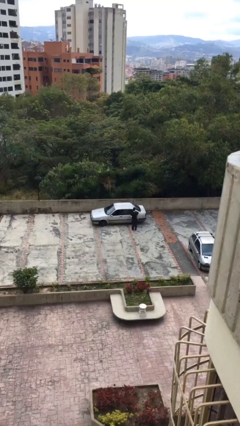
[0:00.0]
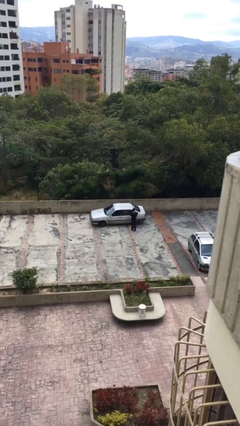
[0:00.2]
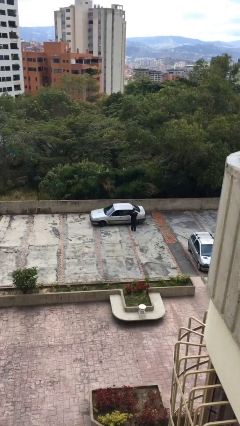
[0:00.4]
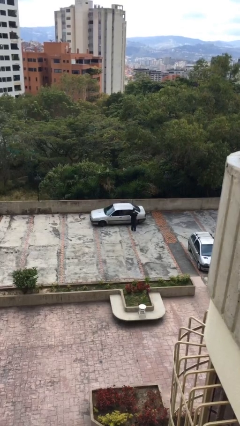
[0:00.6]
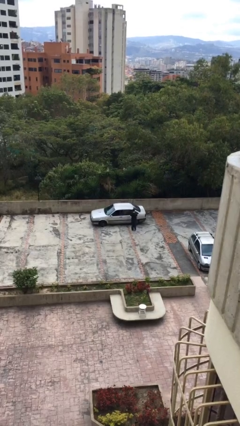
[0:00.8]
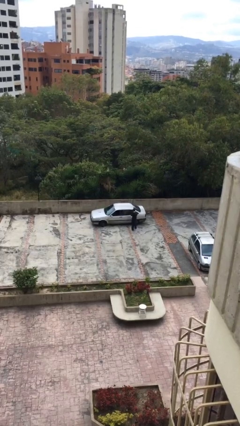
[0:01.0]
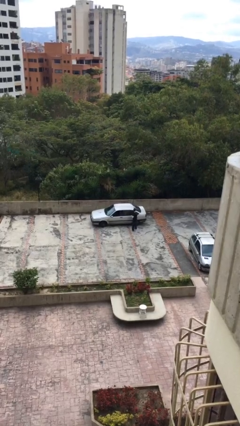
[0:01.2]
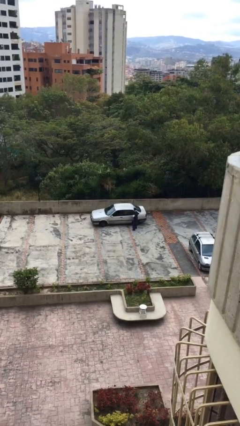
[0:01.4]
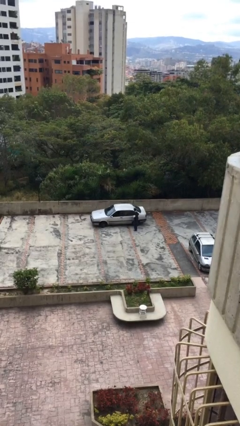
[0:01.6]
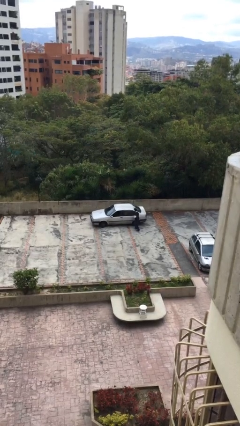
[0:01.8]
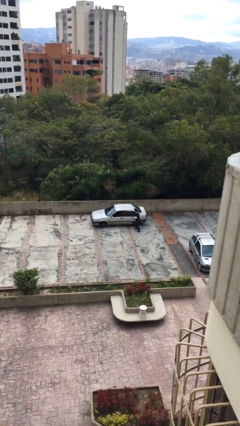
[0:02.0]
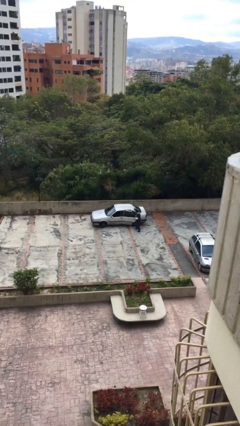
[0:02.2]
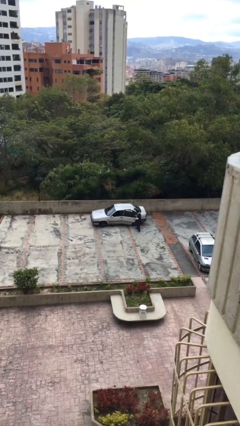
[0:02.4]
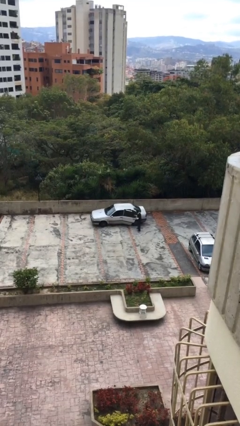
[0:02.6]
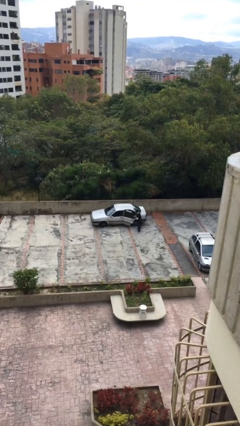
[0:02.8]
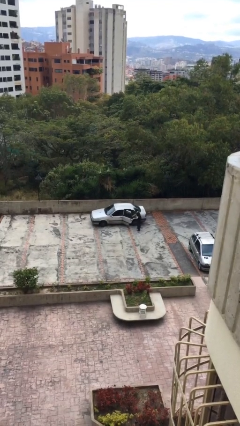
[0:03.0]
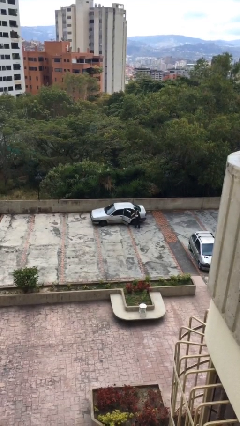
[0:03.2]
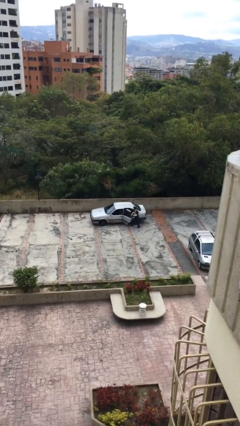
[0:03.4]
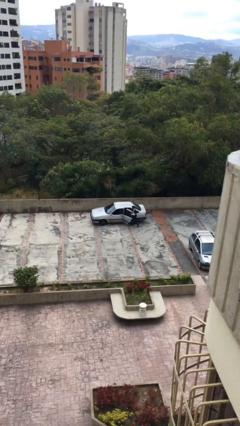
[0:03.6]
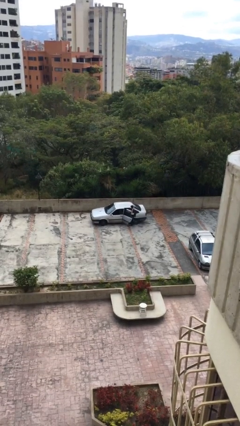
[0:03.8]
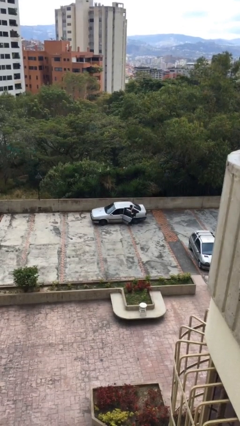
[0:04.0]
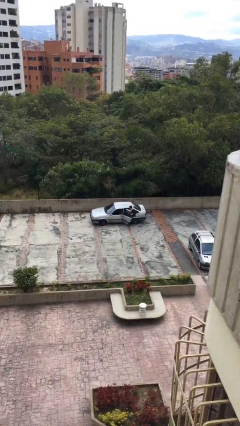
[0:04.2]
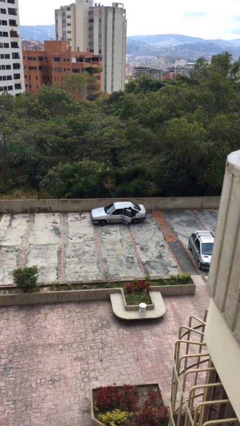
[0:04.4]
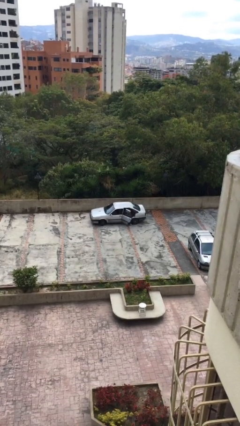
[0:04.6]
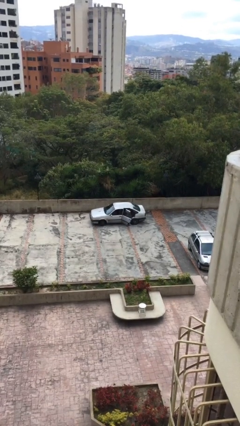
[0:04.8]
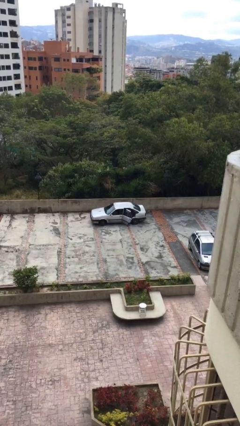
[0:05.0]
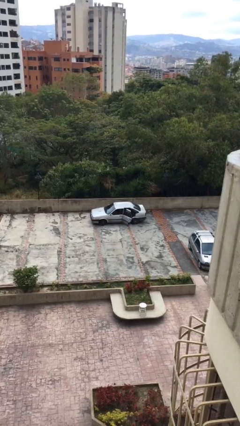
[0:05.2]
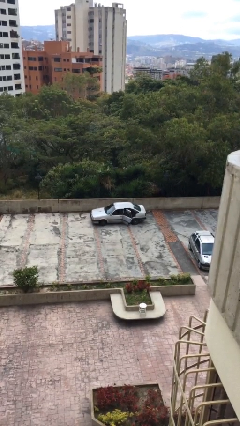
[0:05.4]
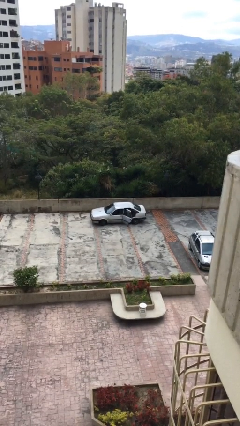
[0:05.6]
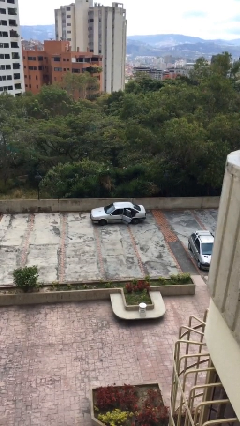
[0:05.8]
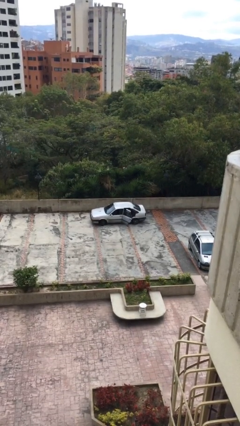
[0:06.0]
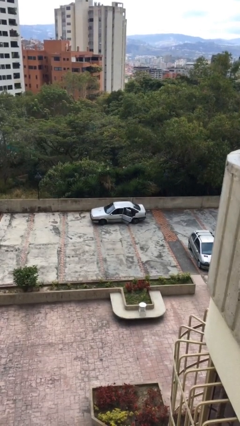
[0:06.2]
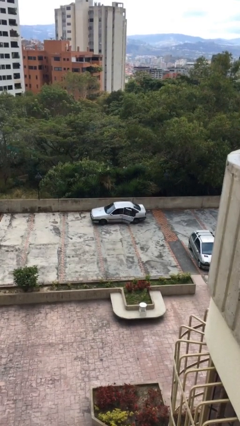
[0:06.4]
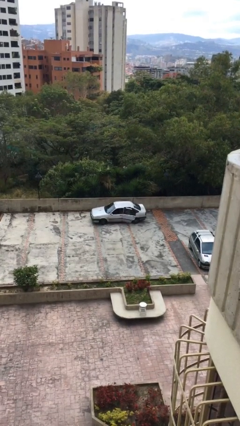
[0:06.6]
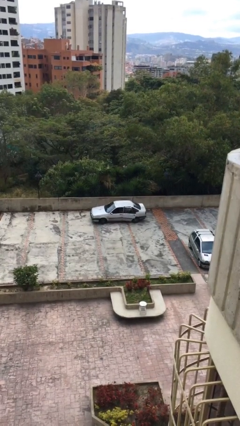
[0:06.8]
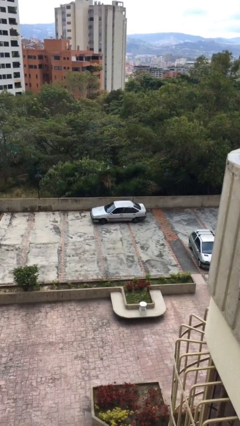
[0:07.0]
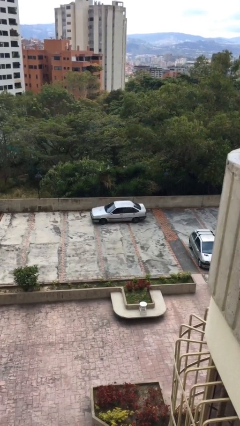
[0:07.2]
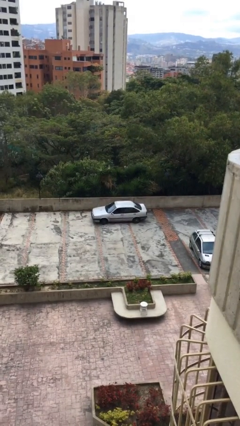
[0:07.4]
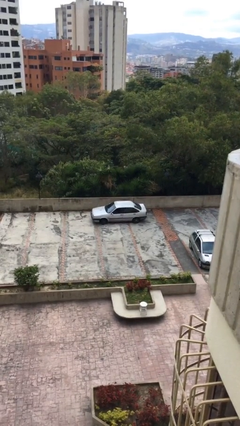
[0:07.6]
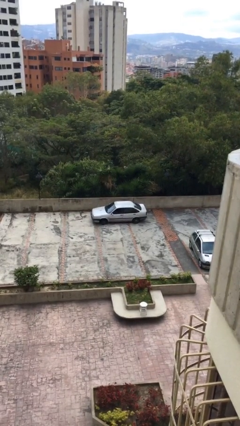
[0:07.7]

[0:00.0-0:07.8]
car picks up person

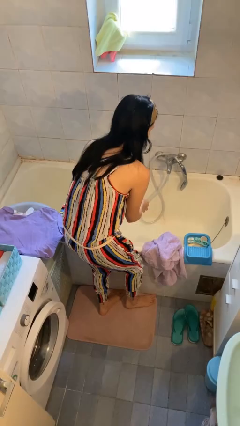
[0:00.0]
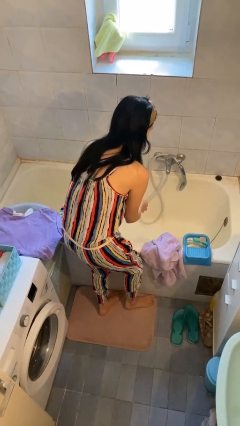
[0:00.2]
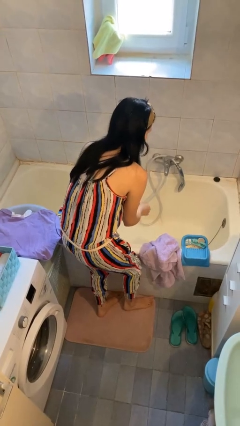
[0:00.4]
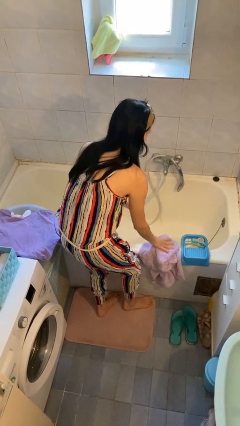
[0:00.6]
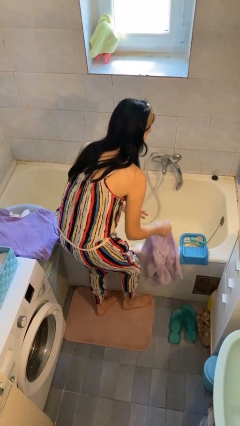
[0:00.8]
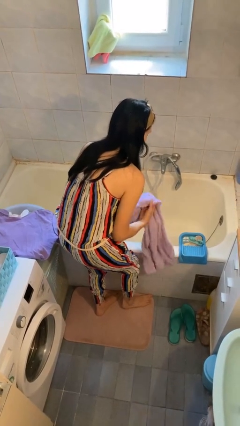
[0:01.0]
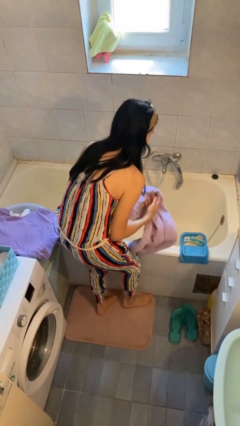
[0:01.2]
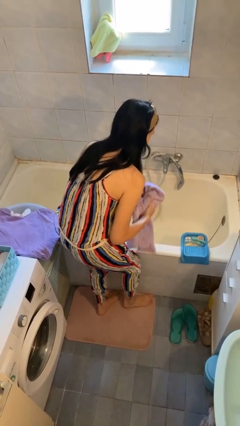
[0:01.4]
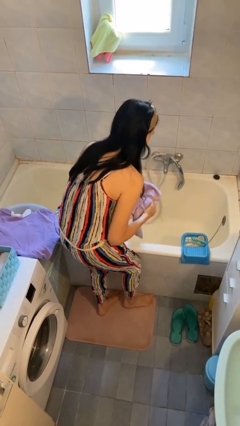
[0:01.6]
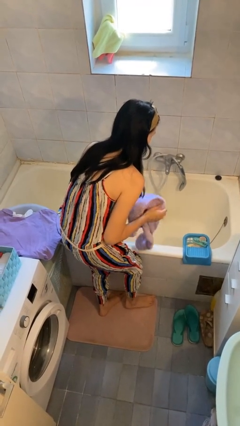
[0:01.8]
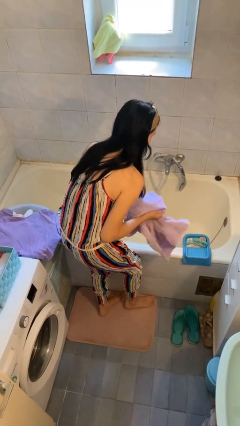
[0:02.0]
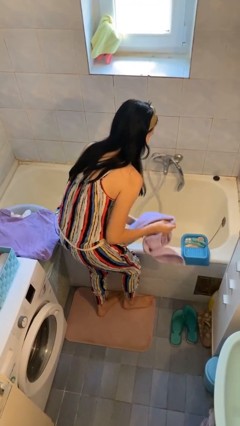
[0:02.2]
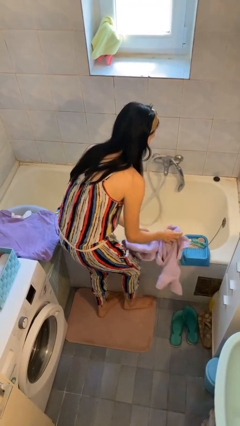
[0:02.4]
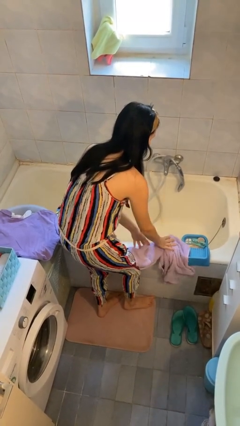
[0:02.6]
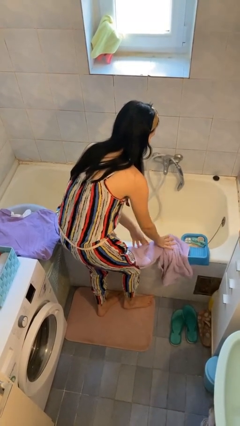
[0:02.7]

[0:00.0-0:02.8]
person dries hands with towel

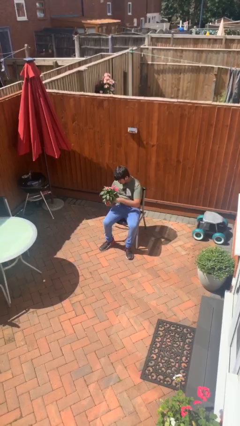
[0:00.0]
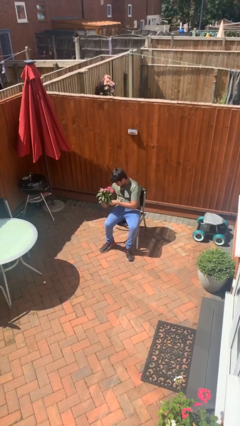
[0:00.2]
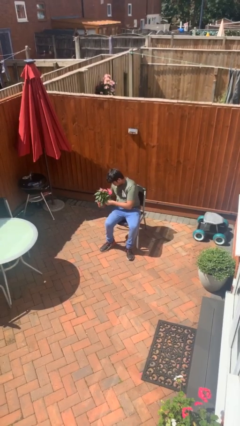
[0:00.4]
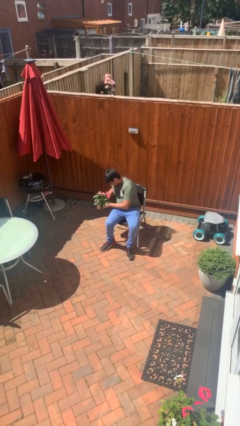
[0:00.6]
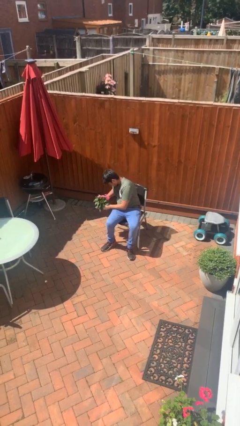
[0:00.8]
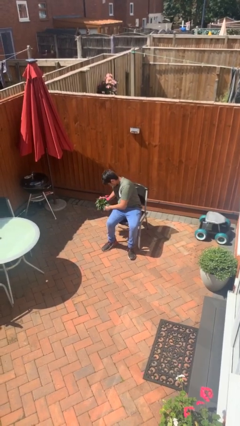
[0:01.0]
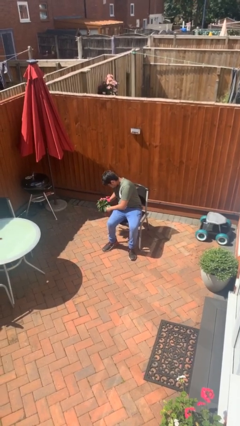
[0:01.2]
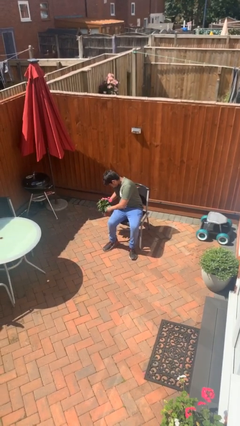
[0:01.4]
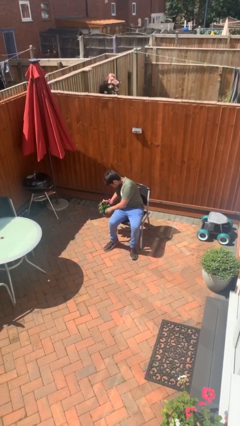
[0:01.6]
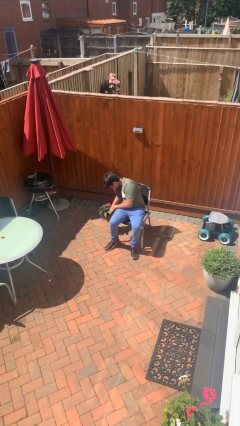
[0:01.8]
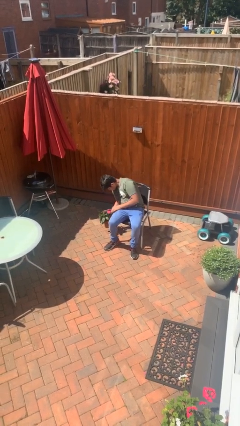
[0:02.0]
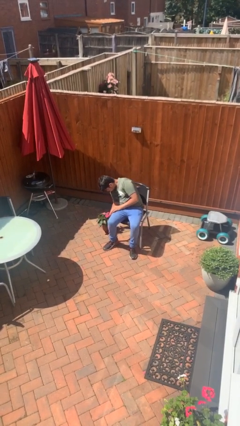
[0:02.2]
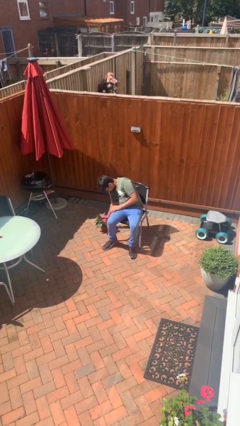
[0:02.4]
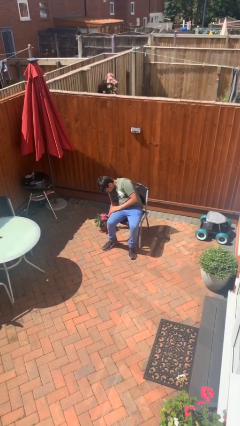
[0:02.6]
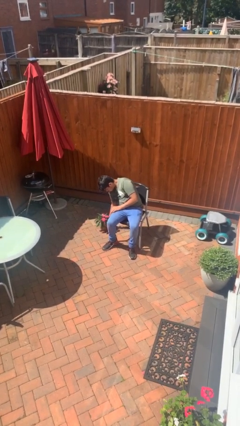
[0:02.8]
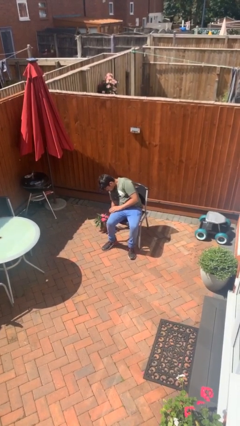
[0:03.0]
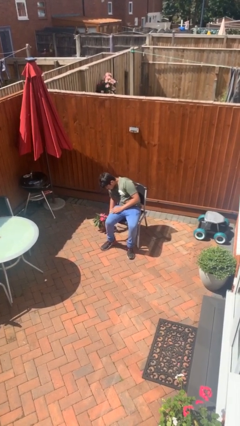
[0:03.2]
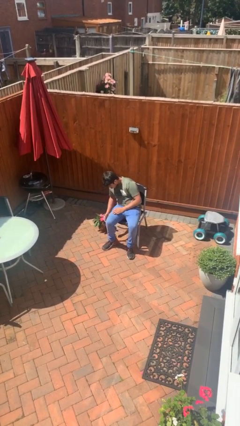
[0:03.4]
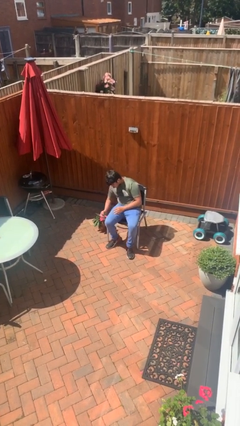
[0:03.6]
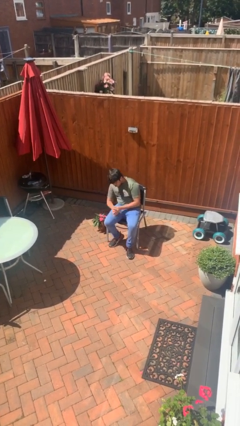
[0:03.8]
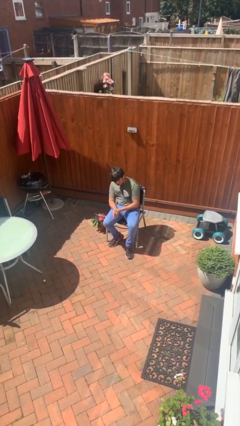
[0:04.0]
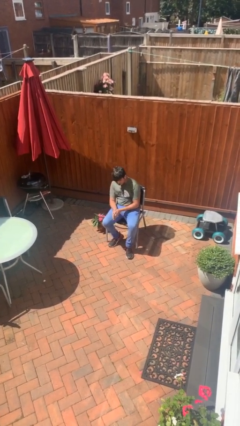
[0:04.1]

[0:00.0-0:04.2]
person puts down object on floor

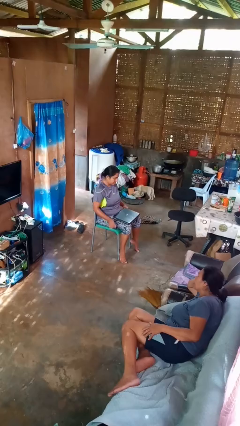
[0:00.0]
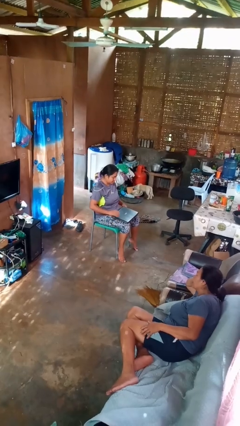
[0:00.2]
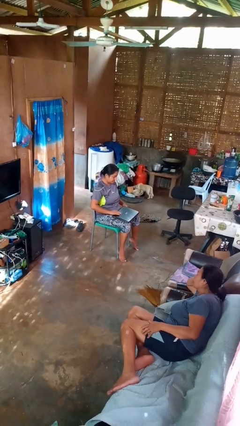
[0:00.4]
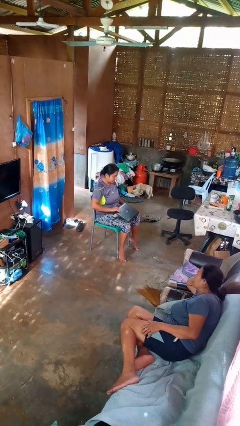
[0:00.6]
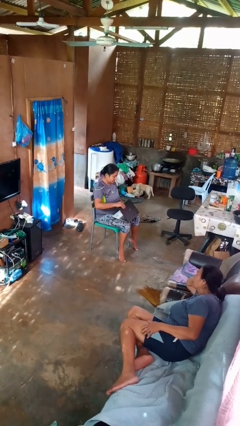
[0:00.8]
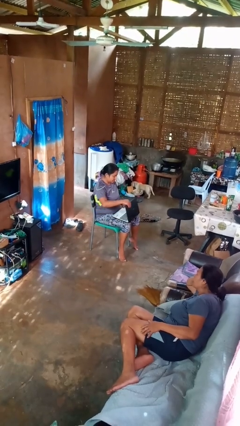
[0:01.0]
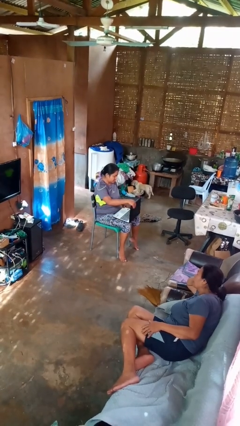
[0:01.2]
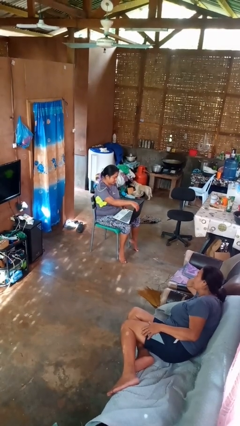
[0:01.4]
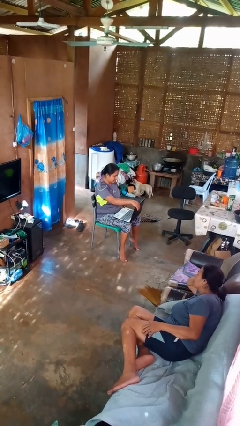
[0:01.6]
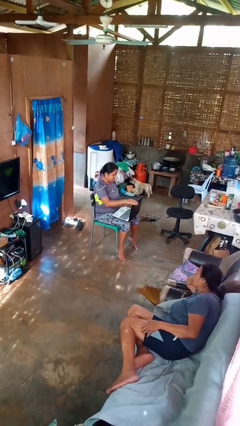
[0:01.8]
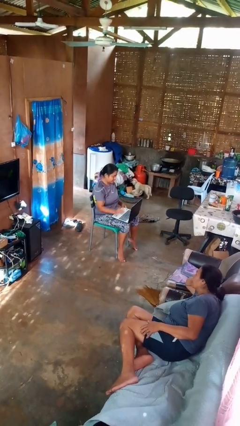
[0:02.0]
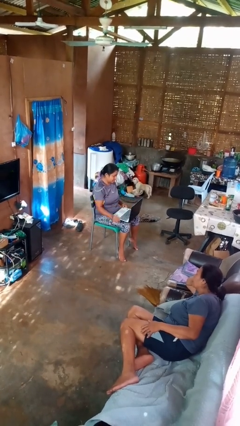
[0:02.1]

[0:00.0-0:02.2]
person opens laptop

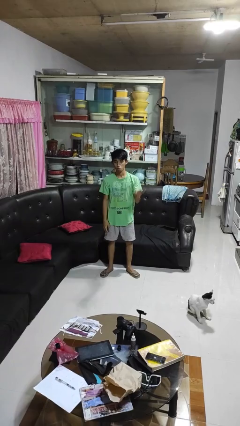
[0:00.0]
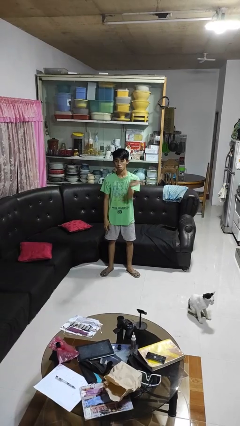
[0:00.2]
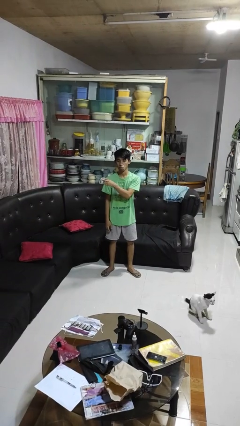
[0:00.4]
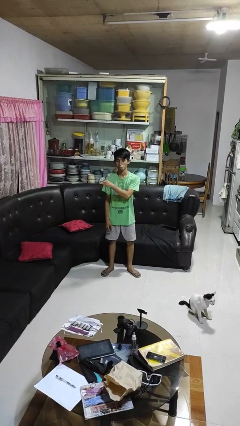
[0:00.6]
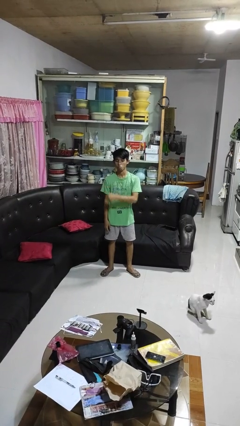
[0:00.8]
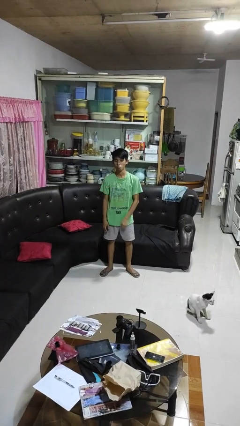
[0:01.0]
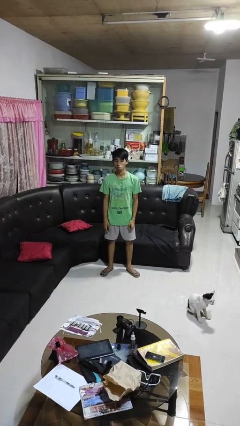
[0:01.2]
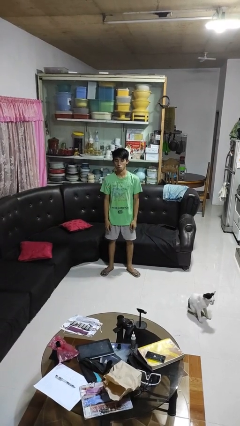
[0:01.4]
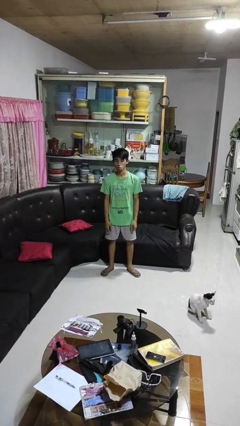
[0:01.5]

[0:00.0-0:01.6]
person gestures swipe right
